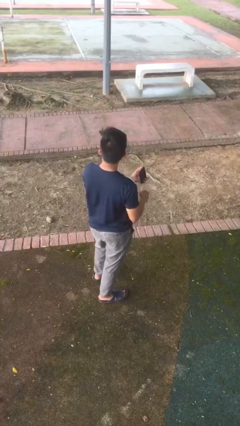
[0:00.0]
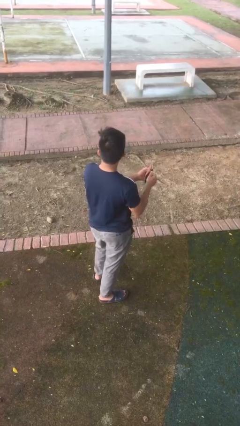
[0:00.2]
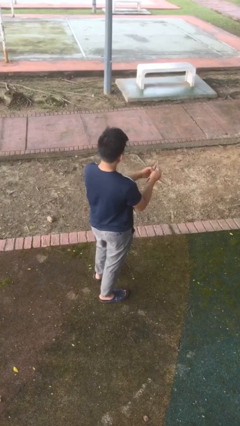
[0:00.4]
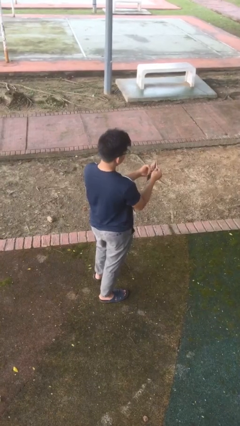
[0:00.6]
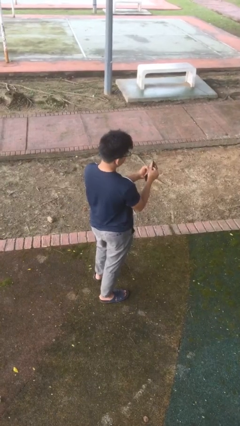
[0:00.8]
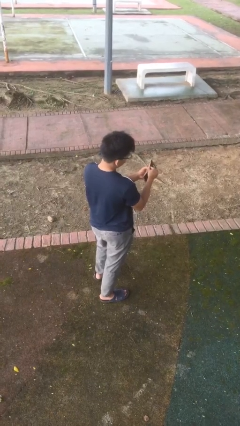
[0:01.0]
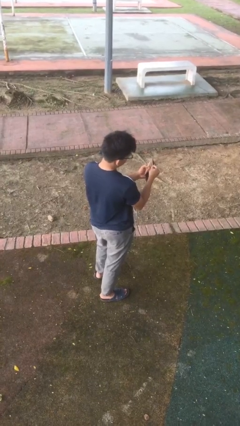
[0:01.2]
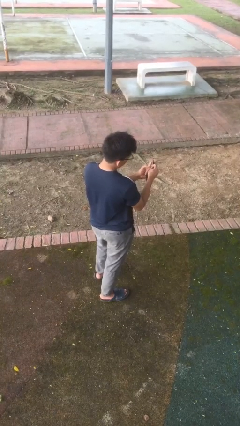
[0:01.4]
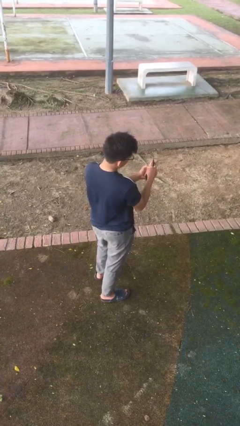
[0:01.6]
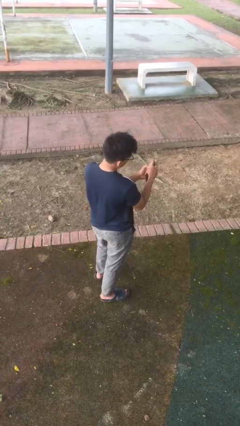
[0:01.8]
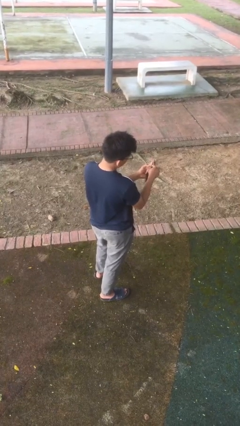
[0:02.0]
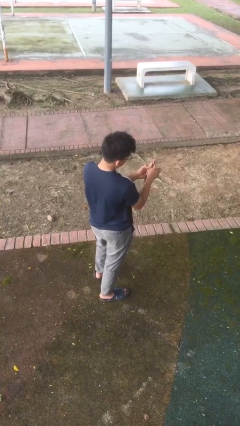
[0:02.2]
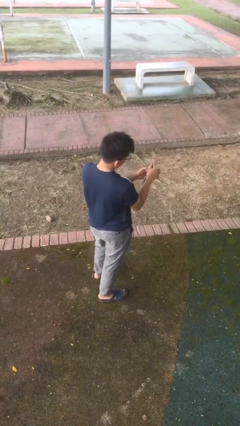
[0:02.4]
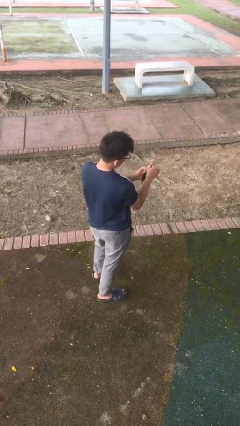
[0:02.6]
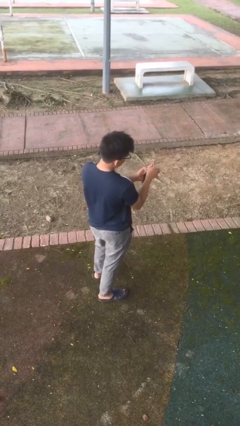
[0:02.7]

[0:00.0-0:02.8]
person searches in purse
